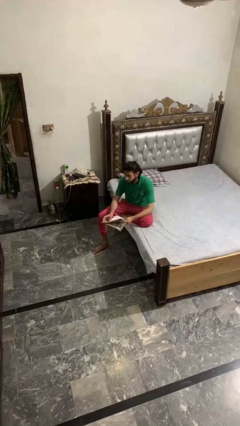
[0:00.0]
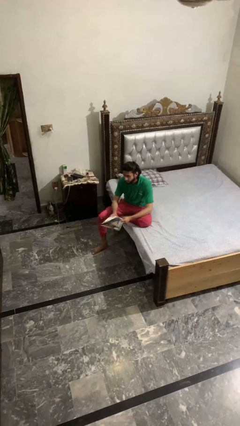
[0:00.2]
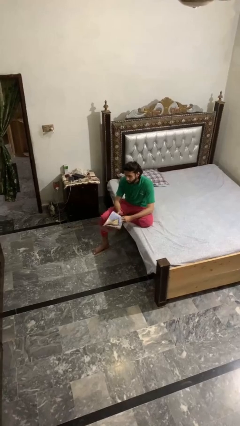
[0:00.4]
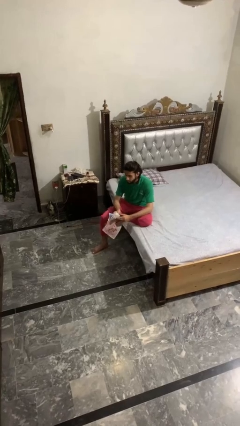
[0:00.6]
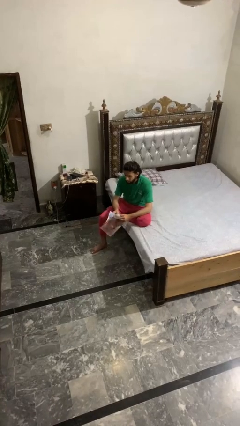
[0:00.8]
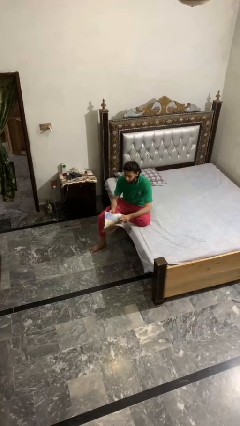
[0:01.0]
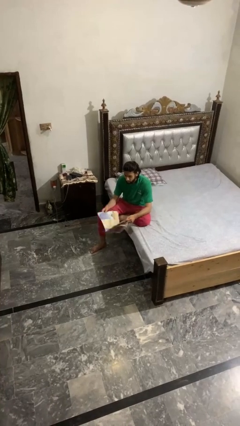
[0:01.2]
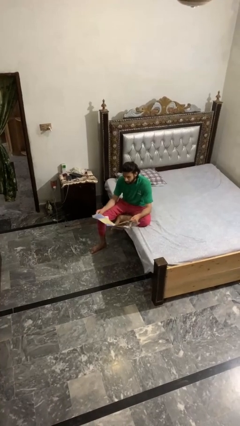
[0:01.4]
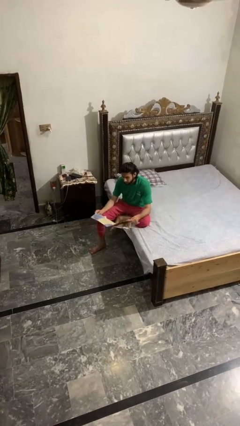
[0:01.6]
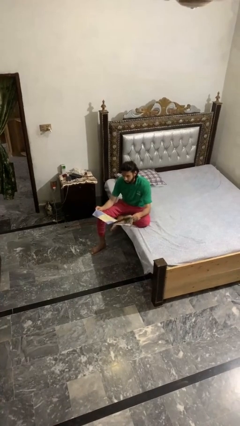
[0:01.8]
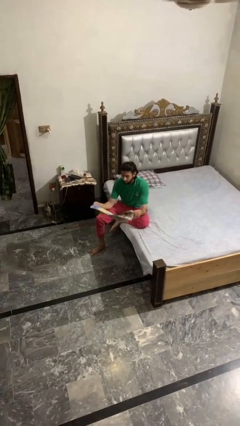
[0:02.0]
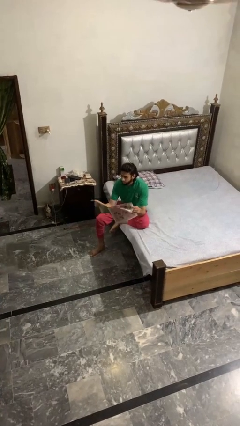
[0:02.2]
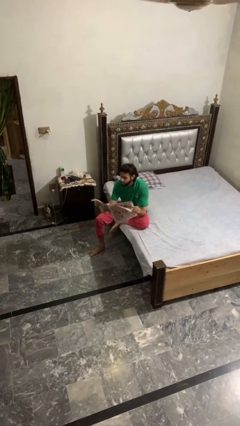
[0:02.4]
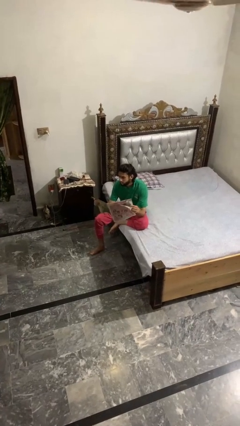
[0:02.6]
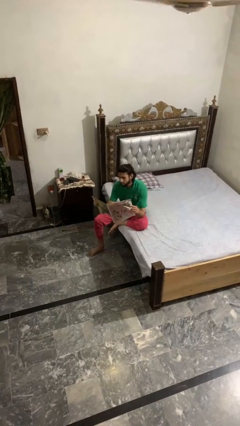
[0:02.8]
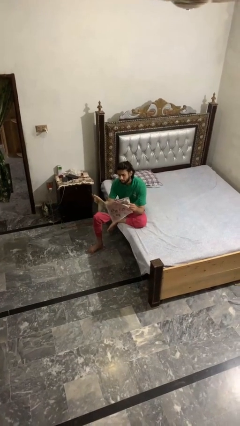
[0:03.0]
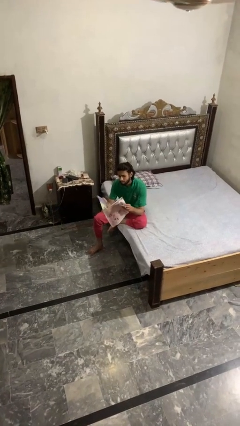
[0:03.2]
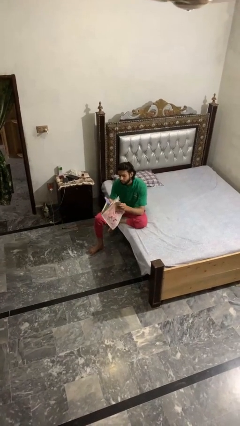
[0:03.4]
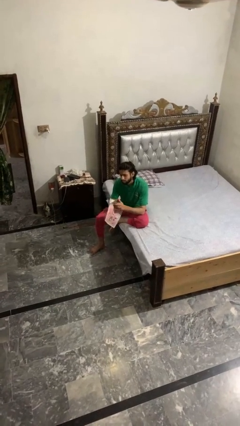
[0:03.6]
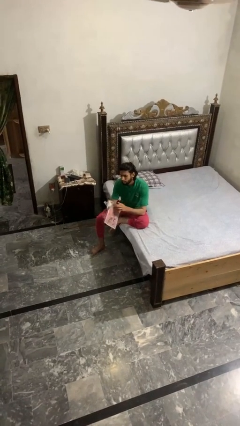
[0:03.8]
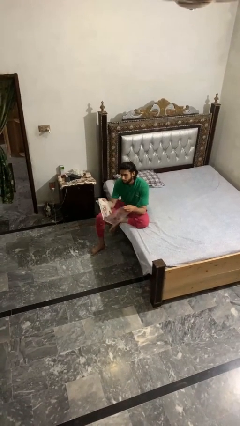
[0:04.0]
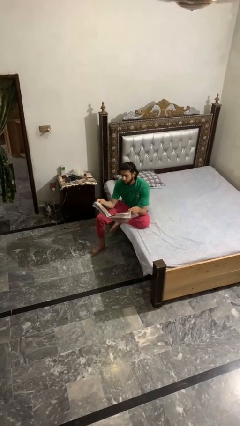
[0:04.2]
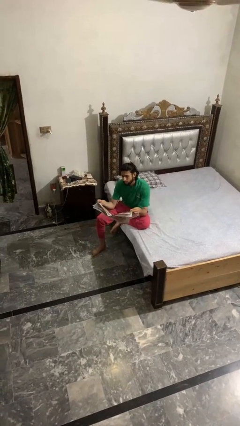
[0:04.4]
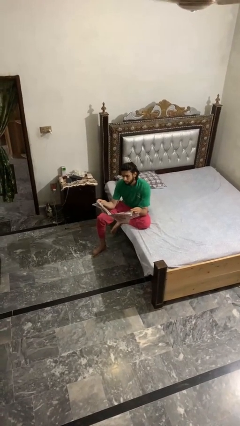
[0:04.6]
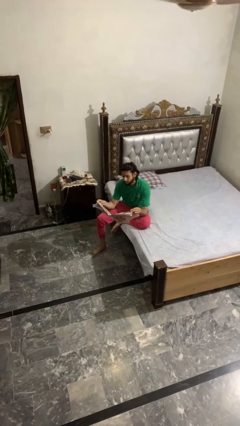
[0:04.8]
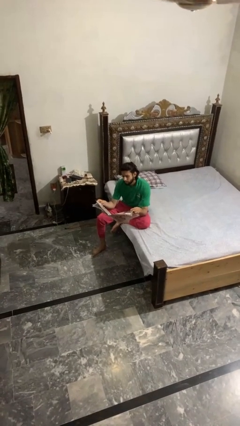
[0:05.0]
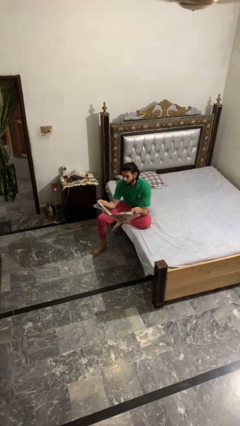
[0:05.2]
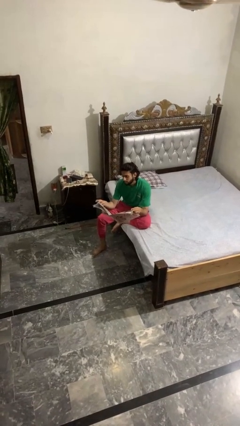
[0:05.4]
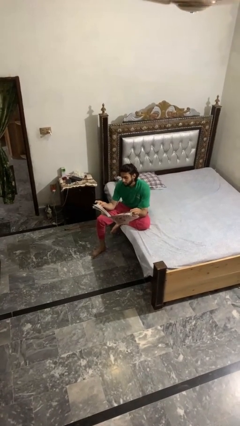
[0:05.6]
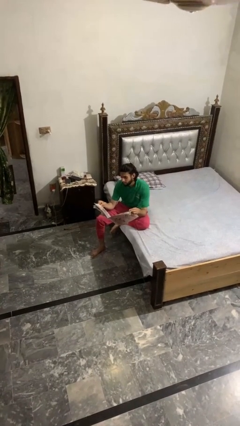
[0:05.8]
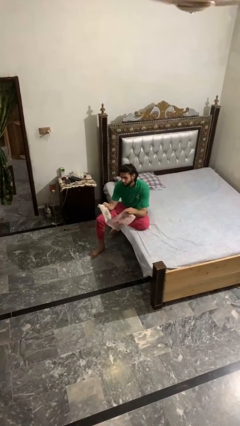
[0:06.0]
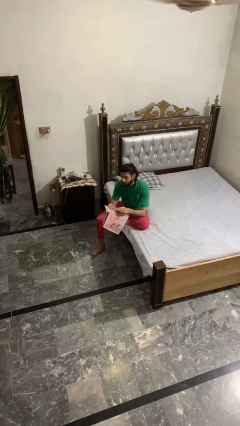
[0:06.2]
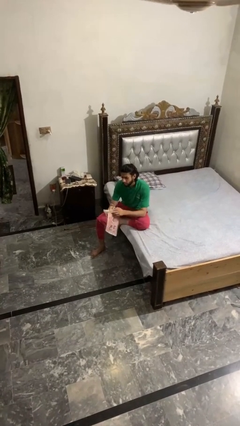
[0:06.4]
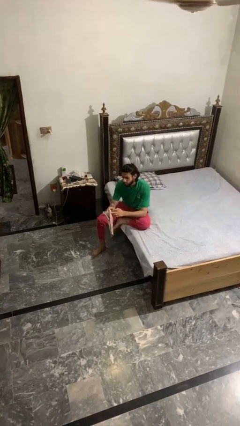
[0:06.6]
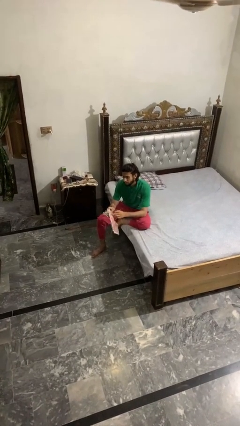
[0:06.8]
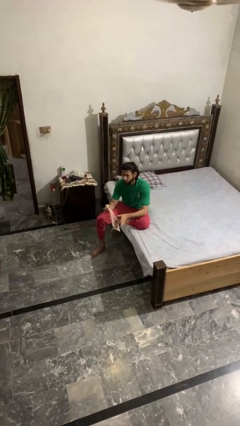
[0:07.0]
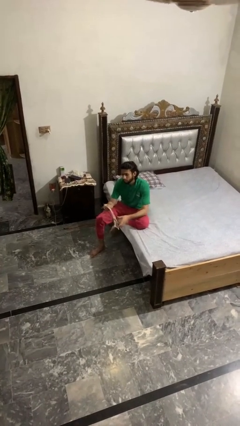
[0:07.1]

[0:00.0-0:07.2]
person reads magazine

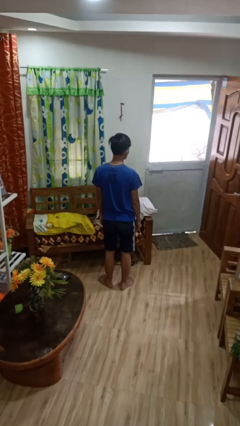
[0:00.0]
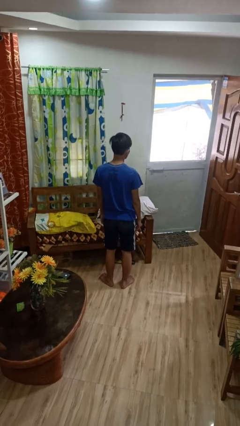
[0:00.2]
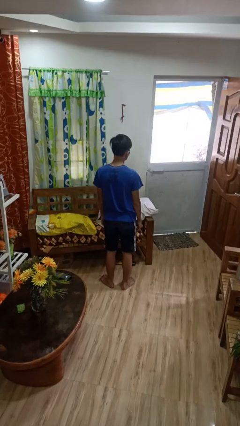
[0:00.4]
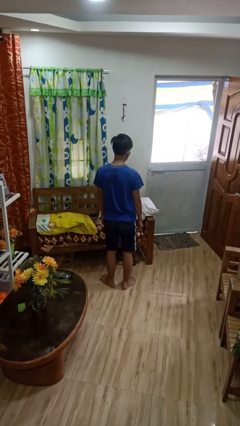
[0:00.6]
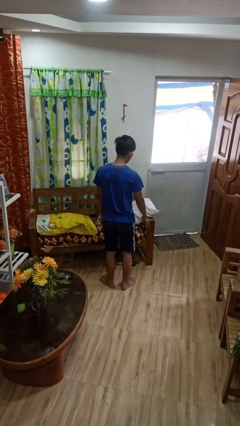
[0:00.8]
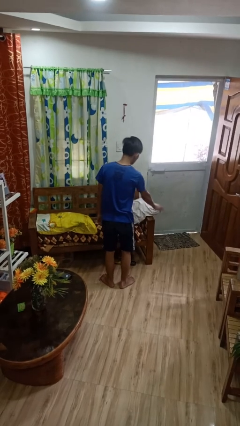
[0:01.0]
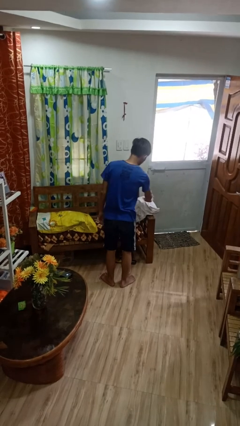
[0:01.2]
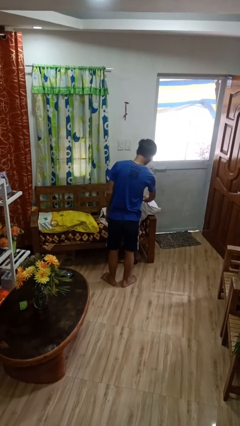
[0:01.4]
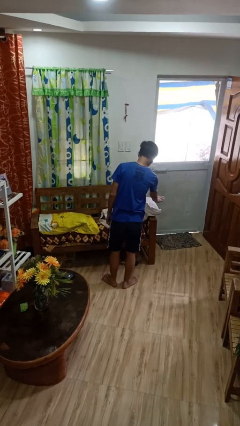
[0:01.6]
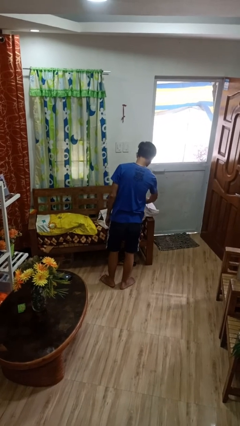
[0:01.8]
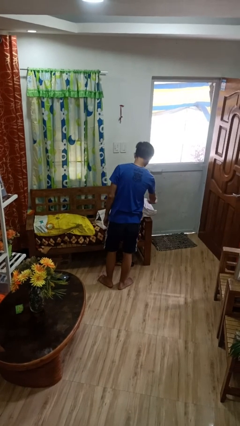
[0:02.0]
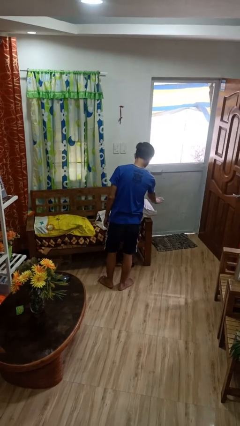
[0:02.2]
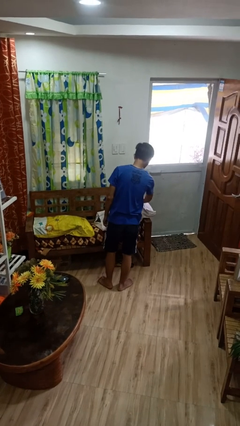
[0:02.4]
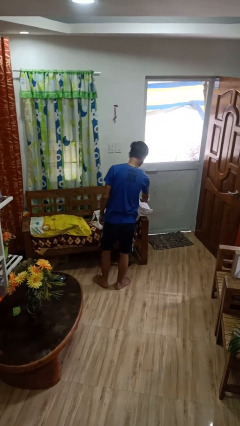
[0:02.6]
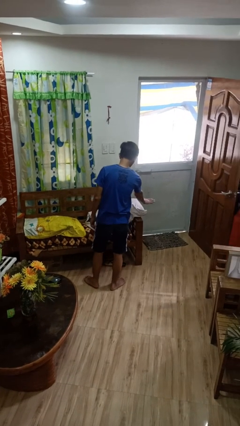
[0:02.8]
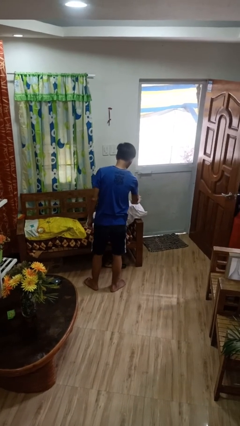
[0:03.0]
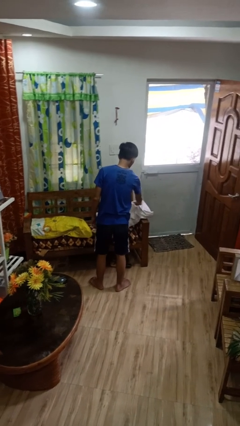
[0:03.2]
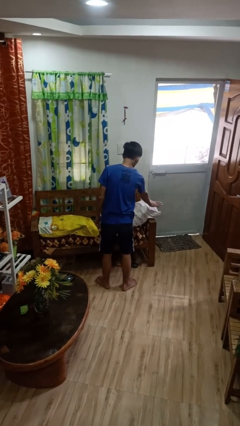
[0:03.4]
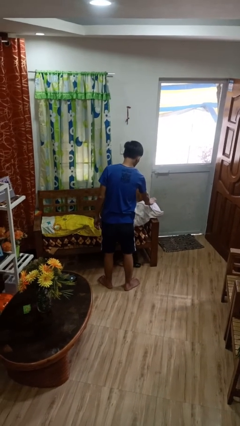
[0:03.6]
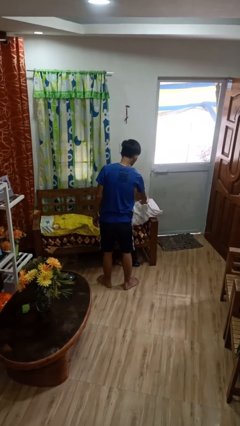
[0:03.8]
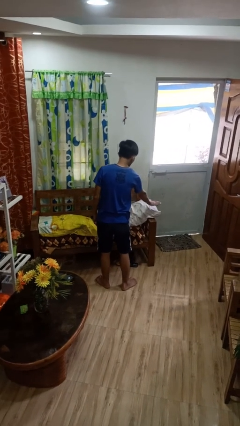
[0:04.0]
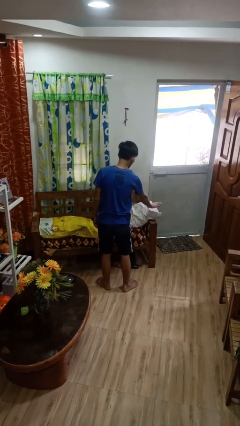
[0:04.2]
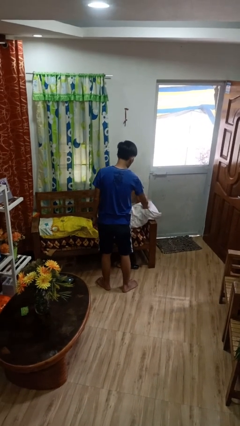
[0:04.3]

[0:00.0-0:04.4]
person waves hand over object

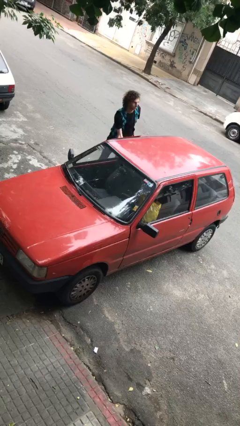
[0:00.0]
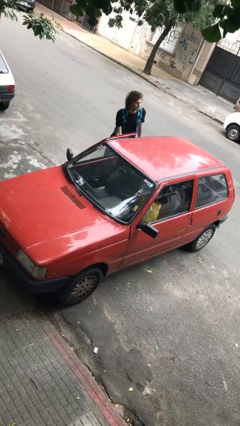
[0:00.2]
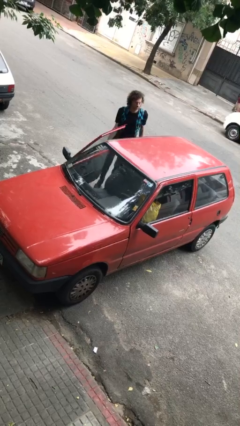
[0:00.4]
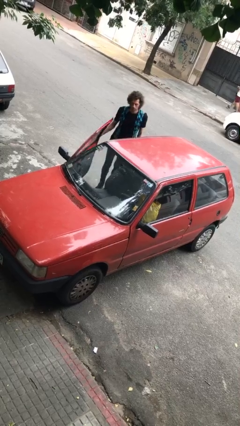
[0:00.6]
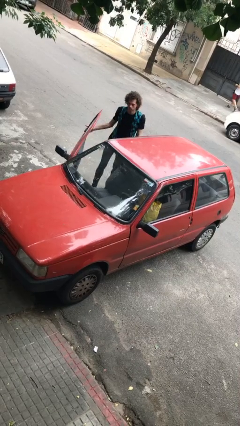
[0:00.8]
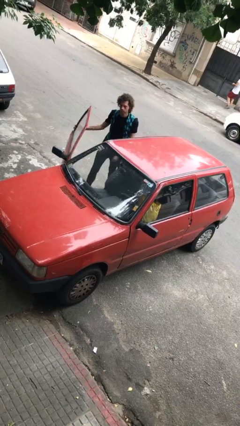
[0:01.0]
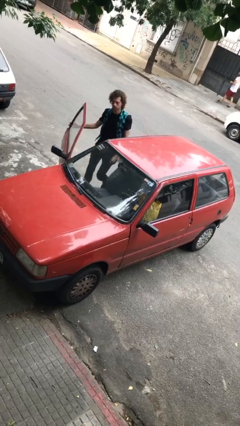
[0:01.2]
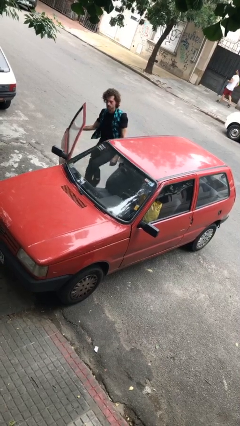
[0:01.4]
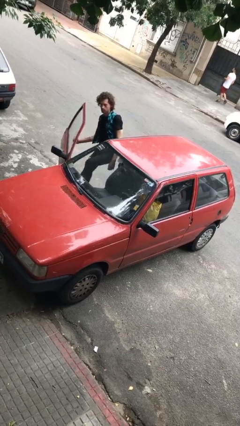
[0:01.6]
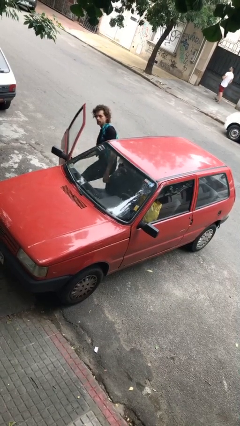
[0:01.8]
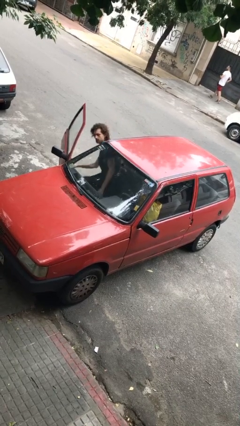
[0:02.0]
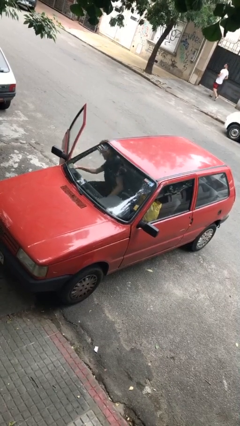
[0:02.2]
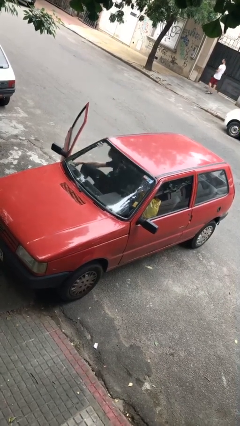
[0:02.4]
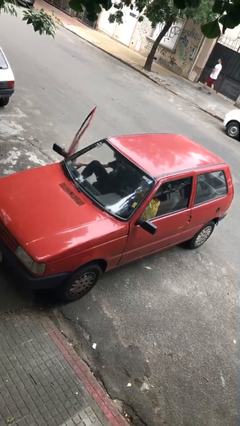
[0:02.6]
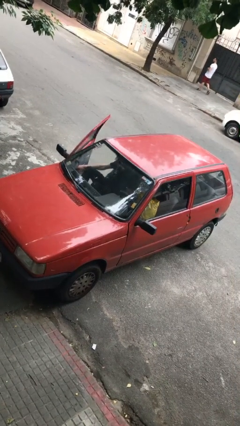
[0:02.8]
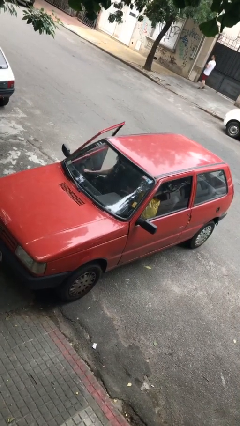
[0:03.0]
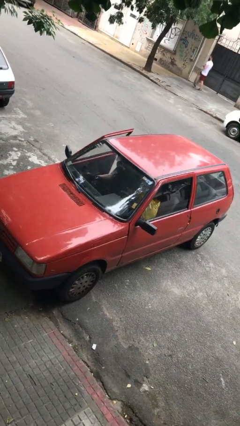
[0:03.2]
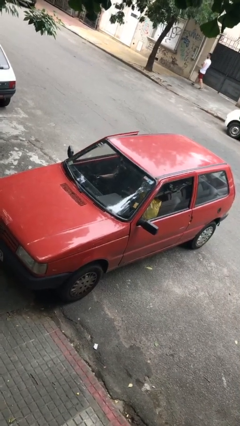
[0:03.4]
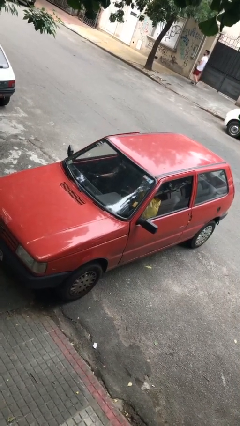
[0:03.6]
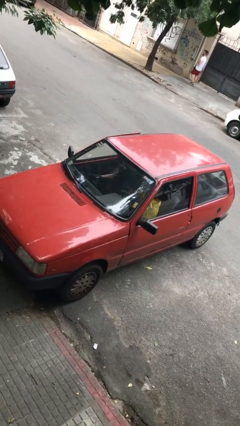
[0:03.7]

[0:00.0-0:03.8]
car picks up person

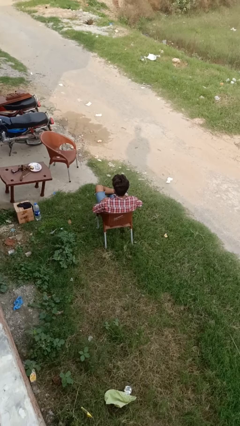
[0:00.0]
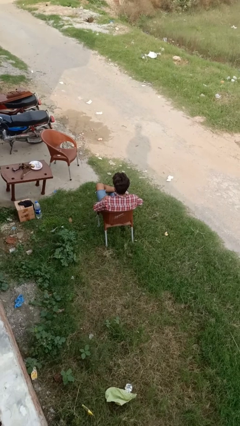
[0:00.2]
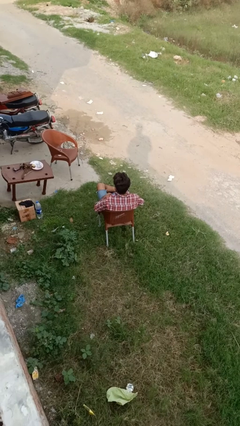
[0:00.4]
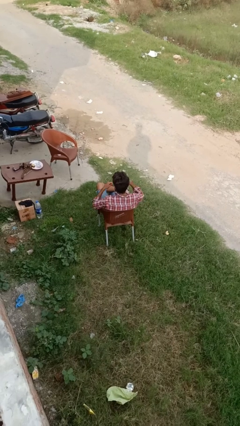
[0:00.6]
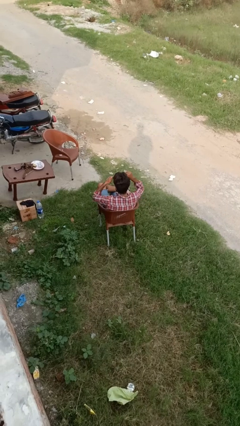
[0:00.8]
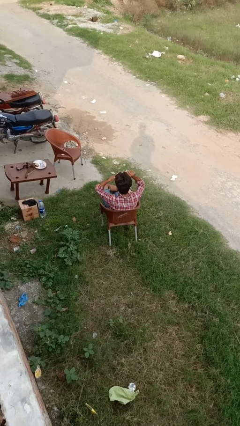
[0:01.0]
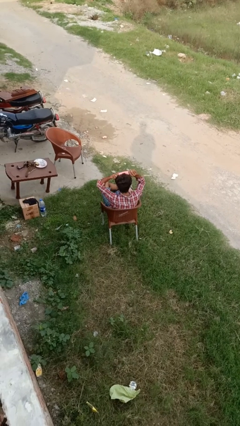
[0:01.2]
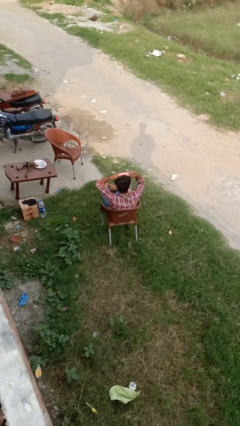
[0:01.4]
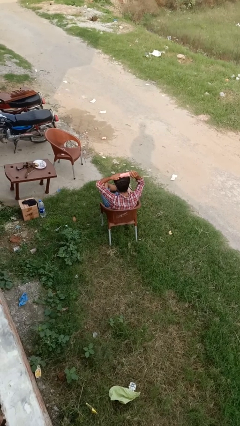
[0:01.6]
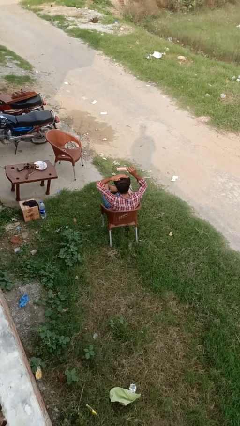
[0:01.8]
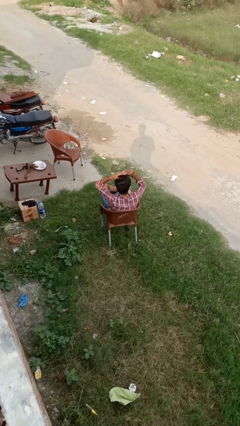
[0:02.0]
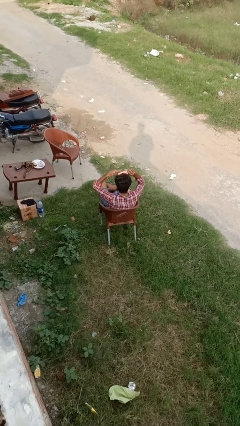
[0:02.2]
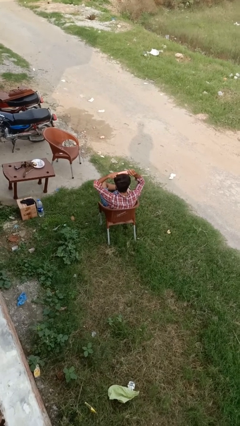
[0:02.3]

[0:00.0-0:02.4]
person brushes hair
